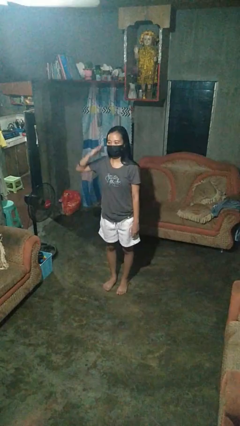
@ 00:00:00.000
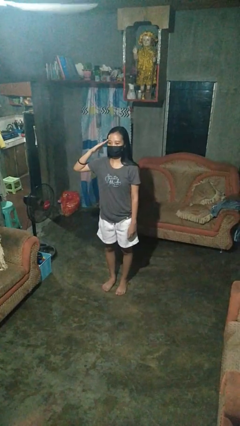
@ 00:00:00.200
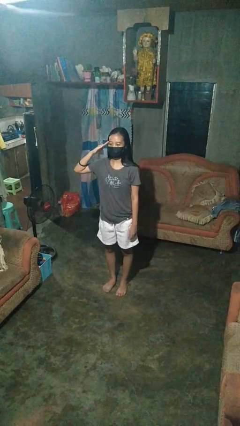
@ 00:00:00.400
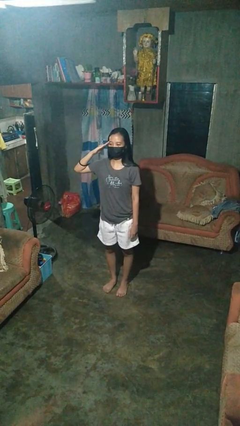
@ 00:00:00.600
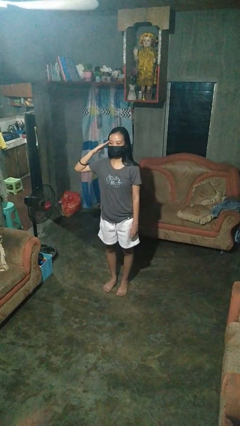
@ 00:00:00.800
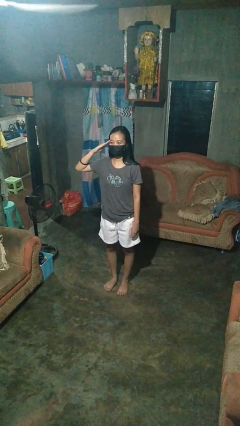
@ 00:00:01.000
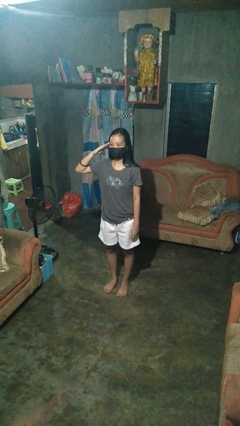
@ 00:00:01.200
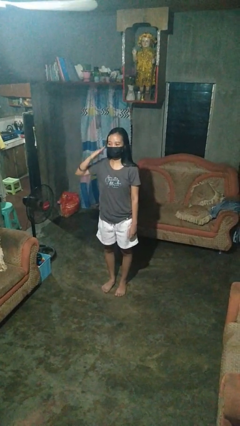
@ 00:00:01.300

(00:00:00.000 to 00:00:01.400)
person salutes

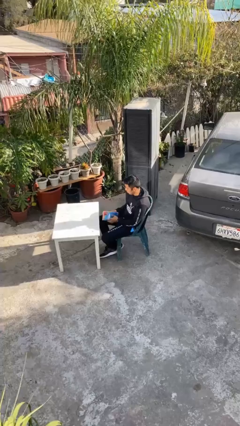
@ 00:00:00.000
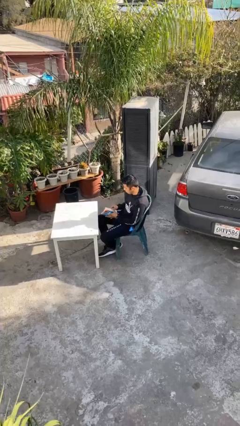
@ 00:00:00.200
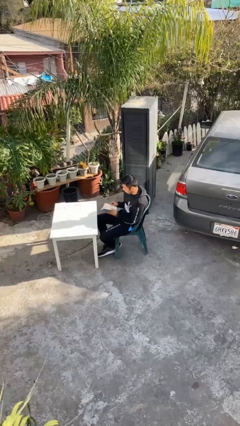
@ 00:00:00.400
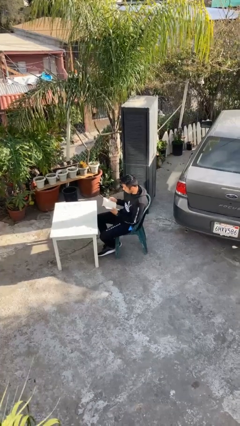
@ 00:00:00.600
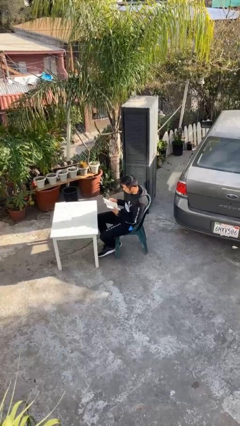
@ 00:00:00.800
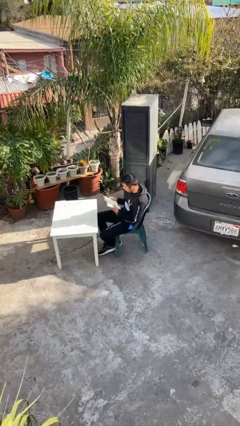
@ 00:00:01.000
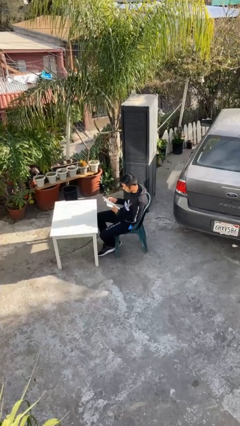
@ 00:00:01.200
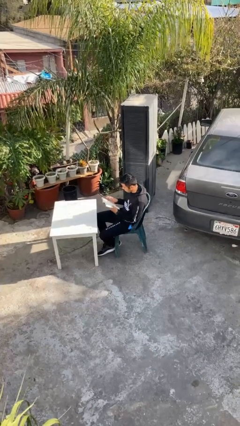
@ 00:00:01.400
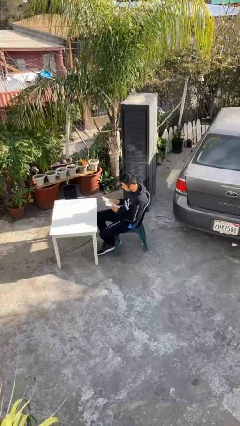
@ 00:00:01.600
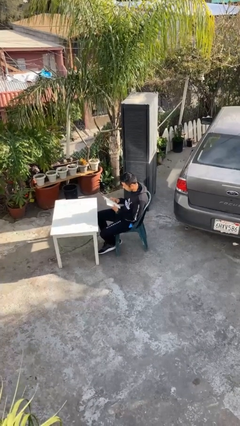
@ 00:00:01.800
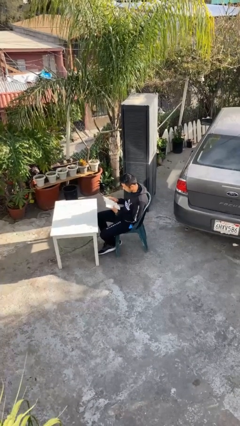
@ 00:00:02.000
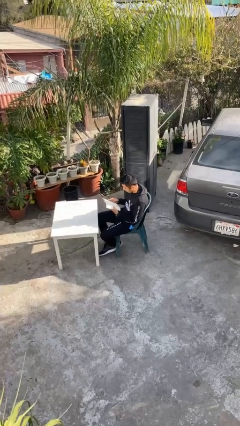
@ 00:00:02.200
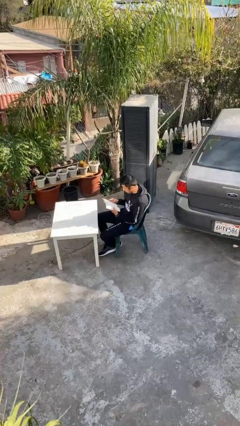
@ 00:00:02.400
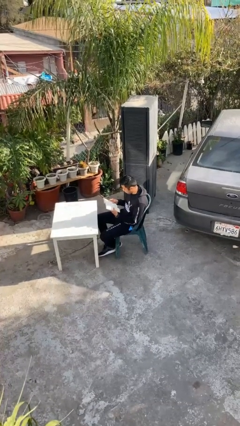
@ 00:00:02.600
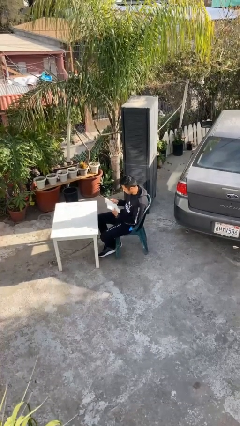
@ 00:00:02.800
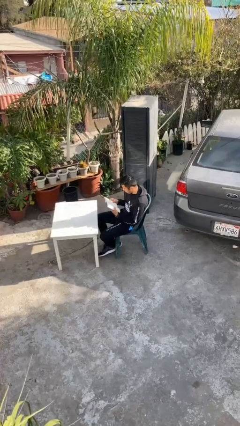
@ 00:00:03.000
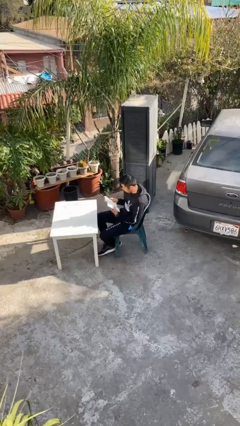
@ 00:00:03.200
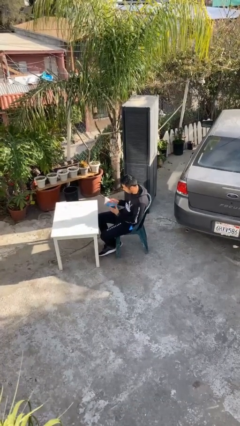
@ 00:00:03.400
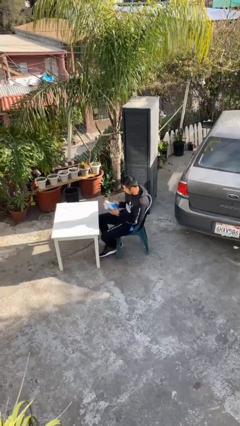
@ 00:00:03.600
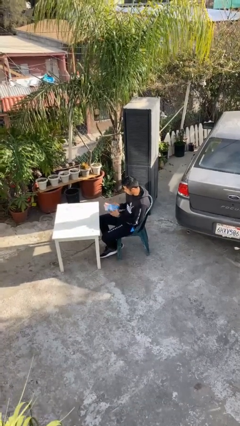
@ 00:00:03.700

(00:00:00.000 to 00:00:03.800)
person reads document

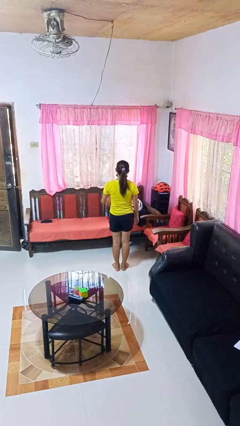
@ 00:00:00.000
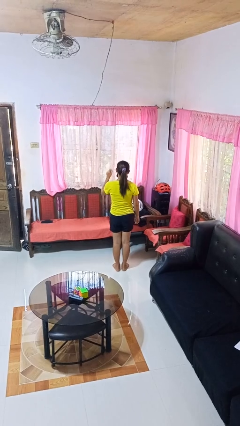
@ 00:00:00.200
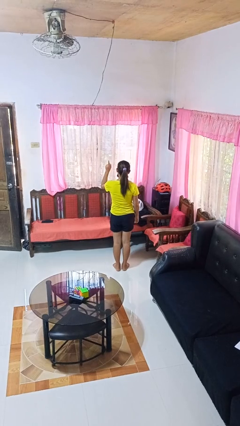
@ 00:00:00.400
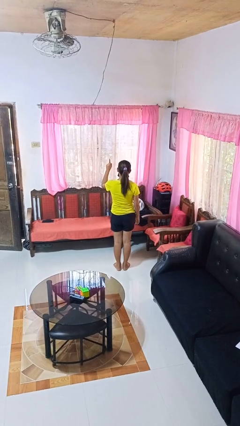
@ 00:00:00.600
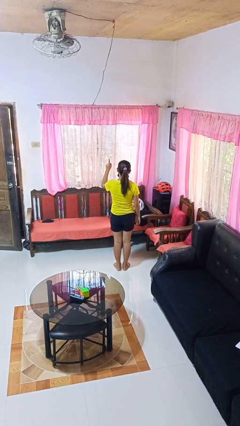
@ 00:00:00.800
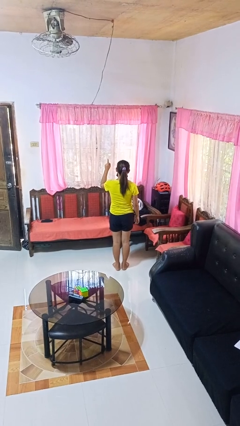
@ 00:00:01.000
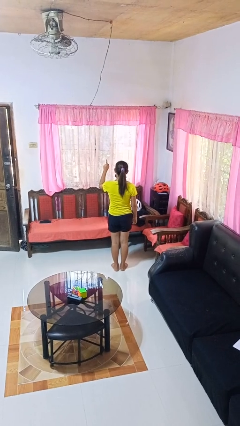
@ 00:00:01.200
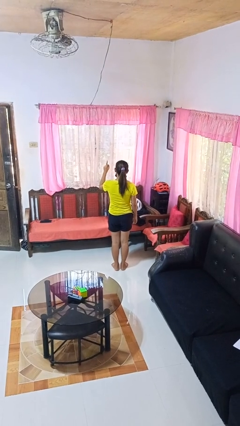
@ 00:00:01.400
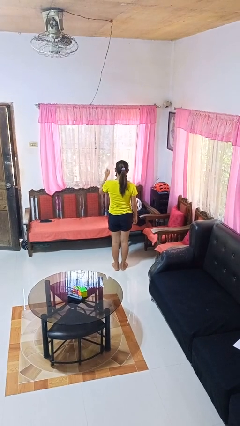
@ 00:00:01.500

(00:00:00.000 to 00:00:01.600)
person gestures number one

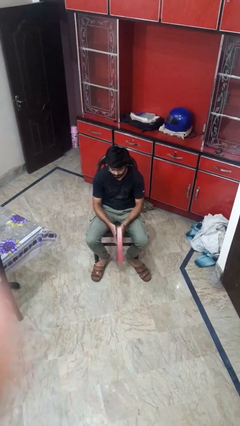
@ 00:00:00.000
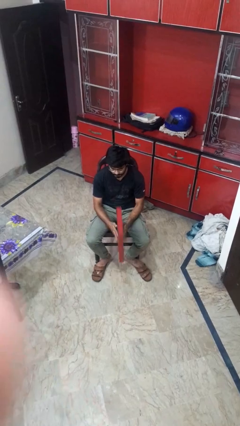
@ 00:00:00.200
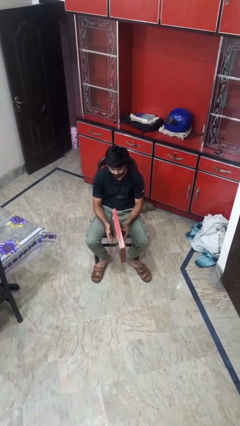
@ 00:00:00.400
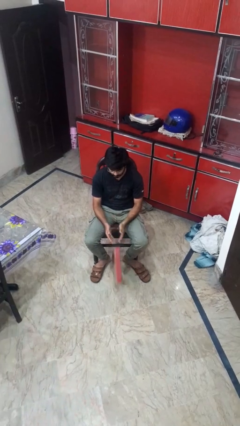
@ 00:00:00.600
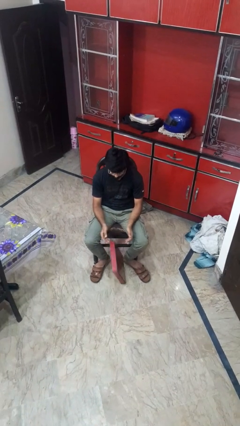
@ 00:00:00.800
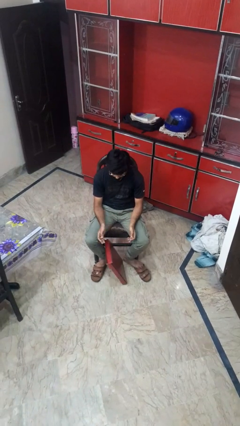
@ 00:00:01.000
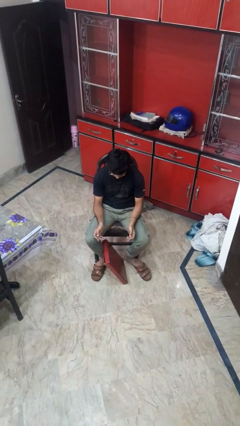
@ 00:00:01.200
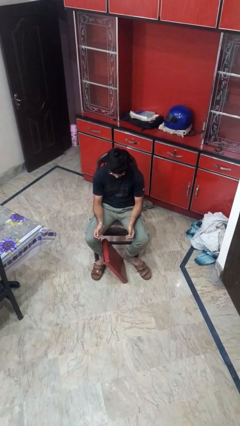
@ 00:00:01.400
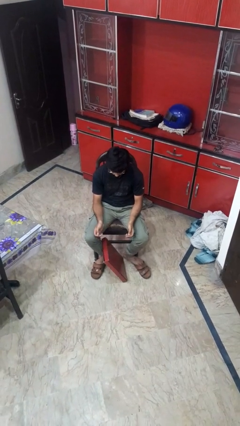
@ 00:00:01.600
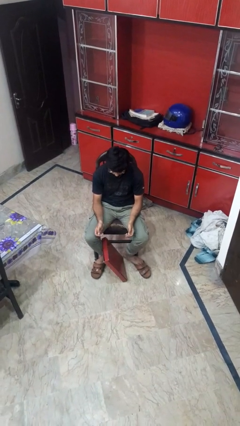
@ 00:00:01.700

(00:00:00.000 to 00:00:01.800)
person drops object

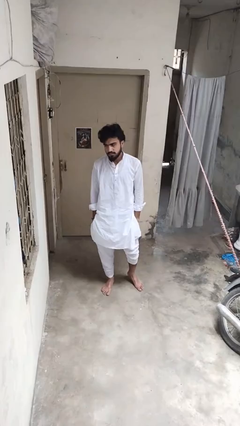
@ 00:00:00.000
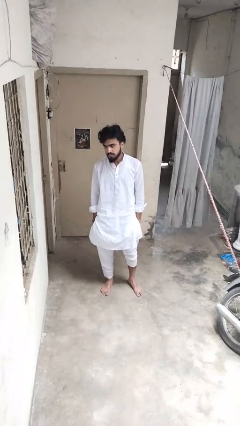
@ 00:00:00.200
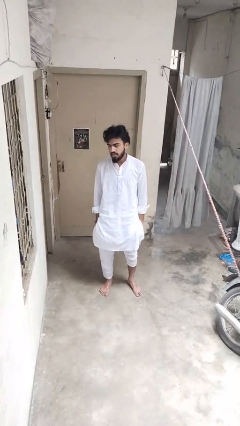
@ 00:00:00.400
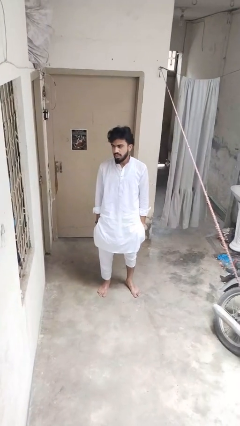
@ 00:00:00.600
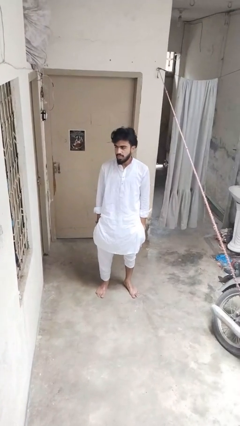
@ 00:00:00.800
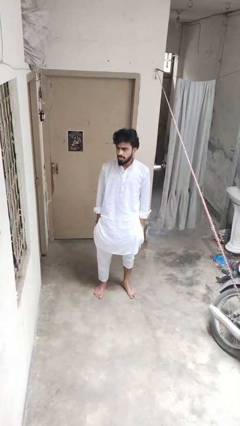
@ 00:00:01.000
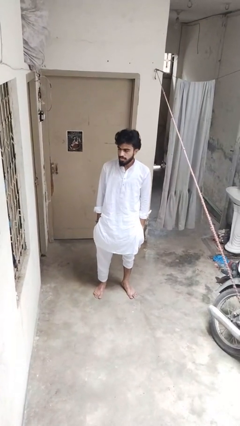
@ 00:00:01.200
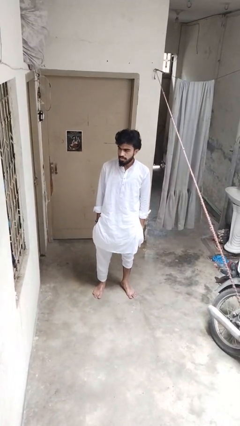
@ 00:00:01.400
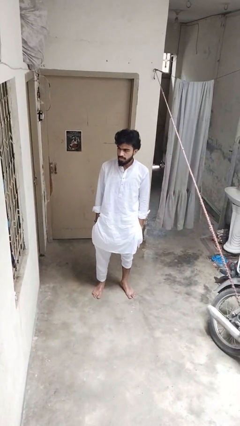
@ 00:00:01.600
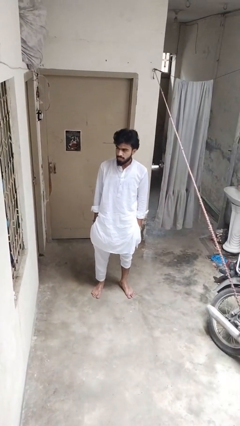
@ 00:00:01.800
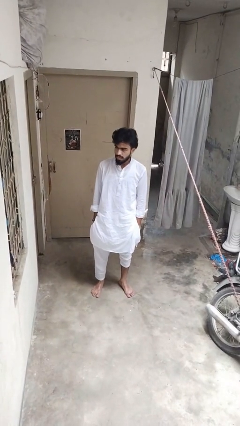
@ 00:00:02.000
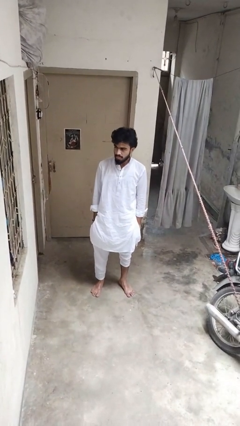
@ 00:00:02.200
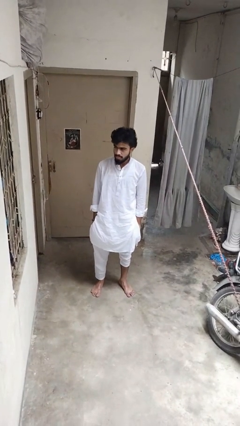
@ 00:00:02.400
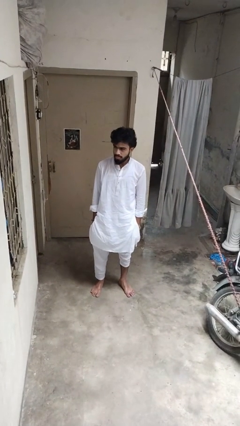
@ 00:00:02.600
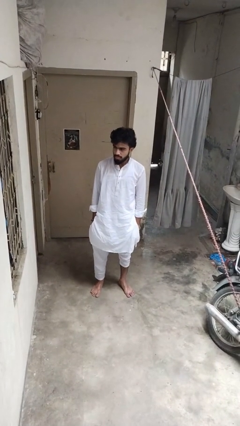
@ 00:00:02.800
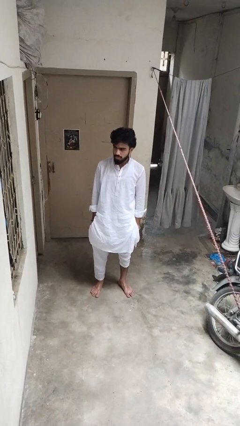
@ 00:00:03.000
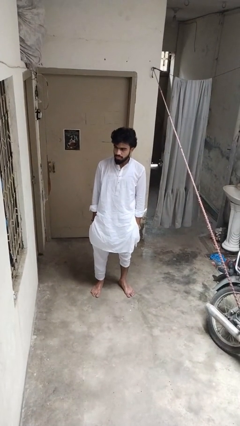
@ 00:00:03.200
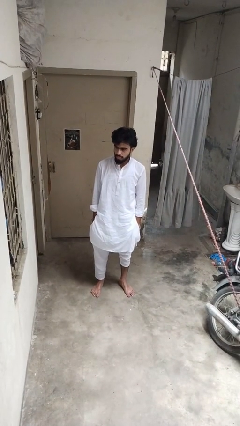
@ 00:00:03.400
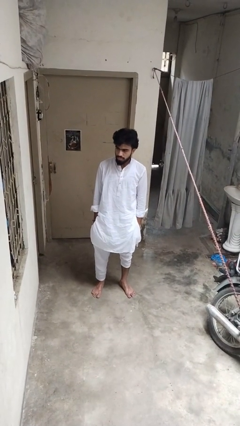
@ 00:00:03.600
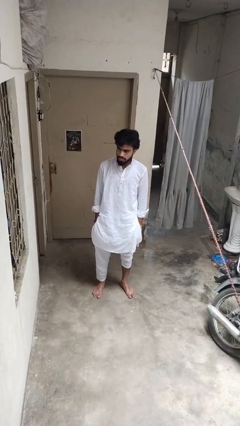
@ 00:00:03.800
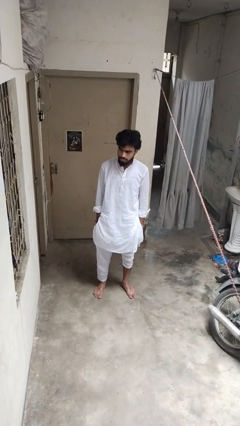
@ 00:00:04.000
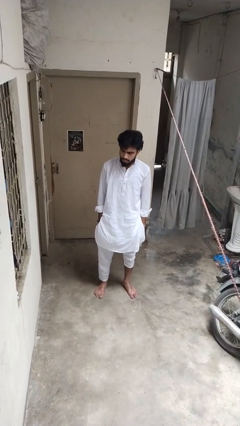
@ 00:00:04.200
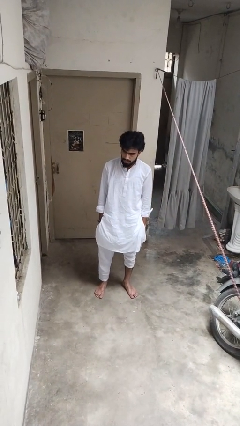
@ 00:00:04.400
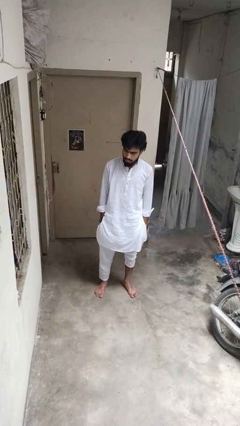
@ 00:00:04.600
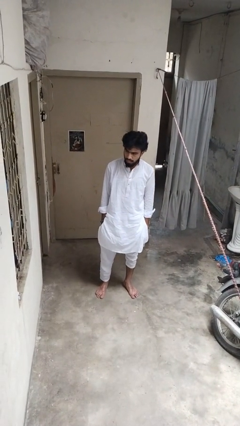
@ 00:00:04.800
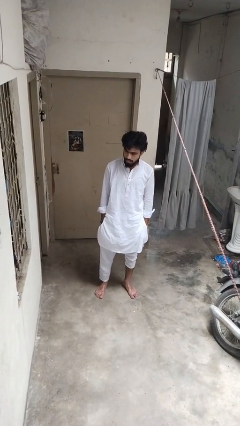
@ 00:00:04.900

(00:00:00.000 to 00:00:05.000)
person sticks out tongue
